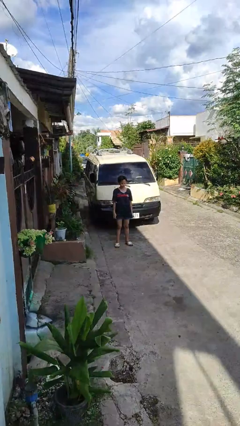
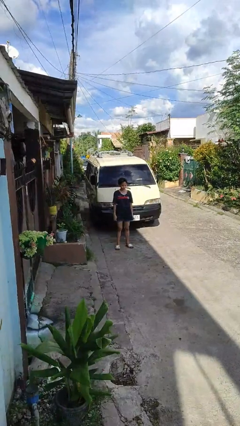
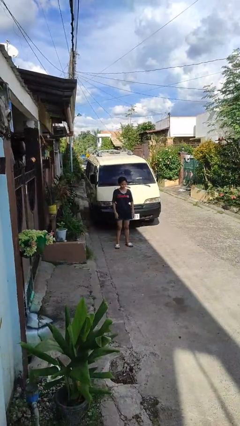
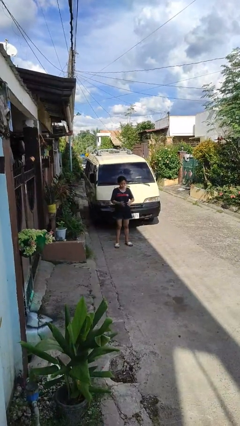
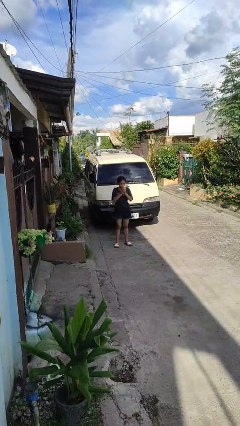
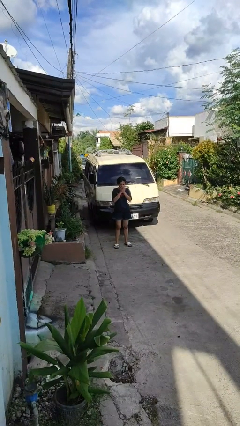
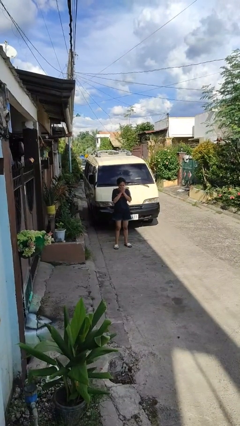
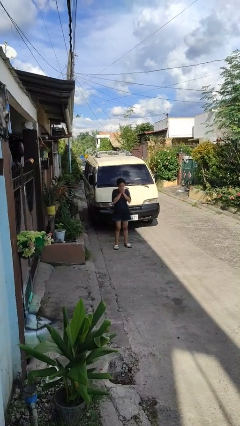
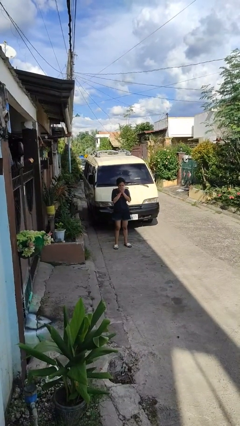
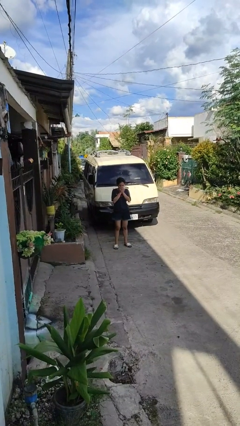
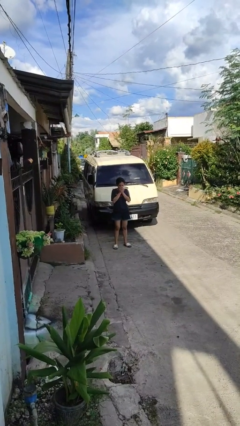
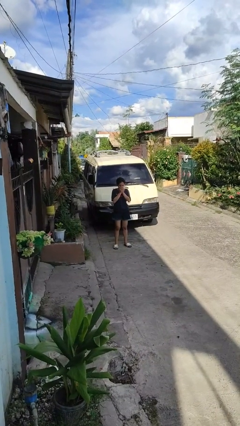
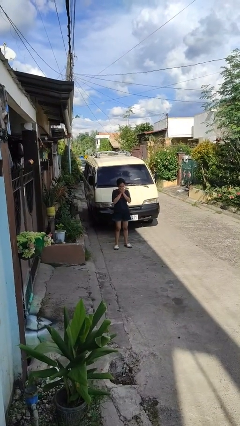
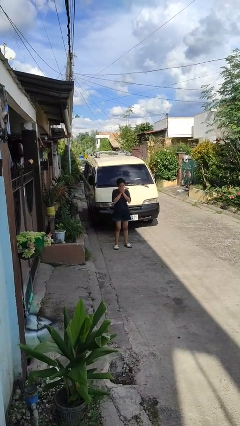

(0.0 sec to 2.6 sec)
person blows into hands

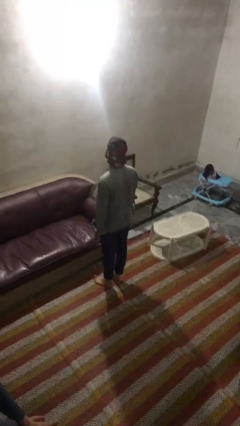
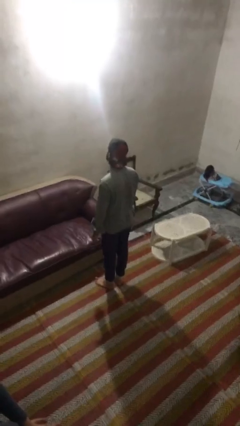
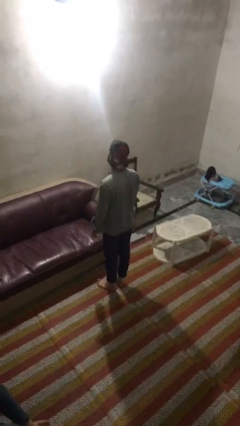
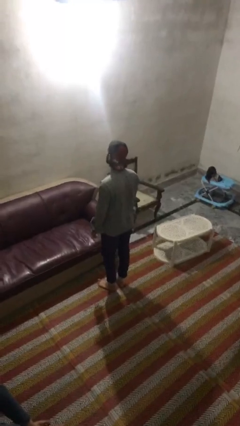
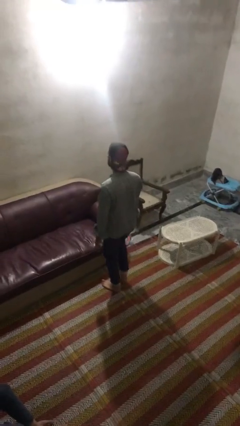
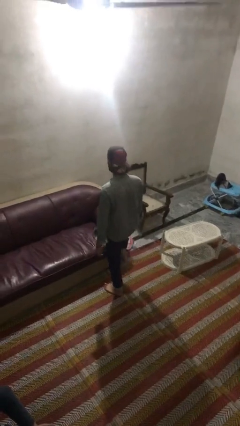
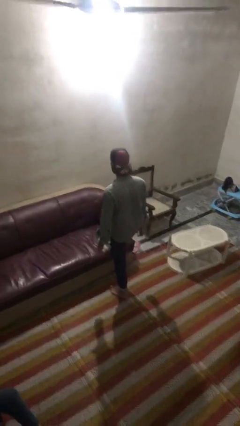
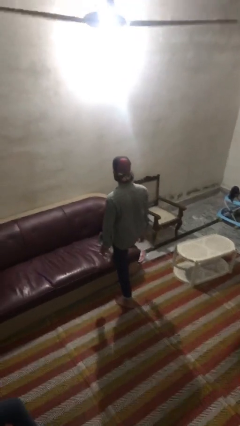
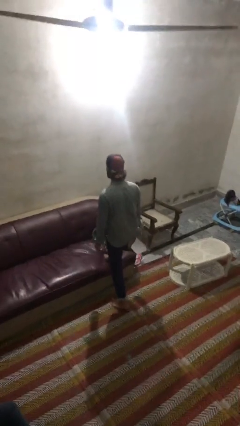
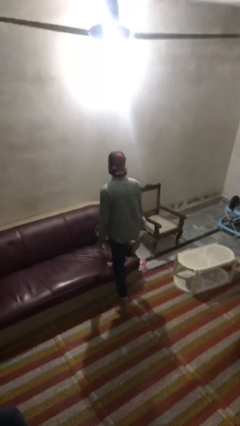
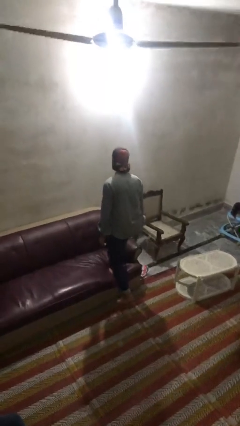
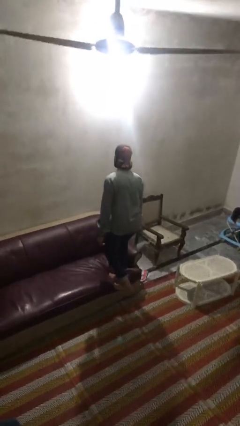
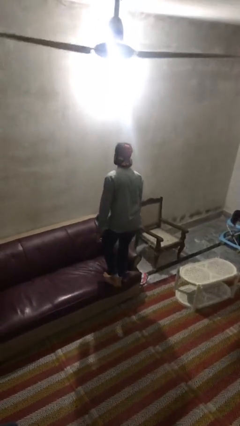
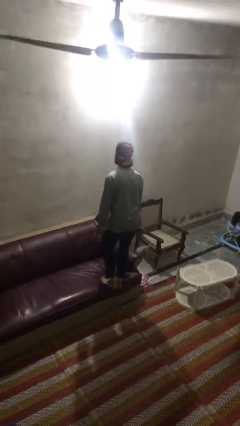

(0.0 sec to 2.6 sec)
person climbs on couch

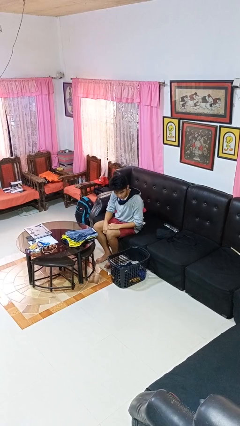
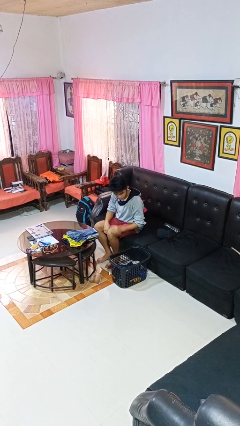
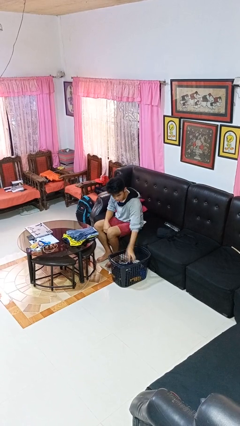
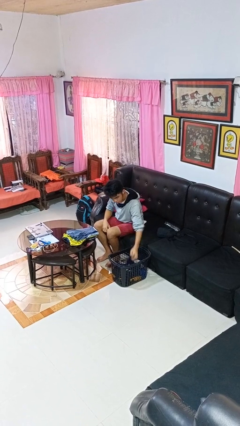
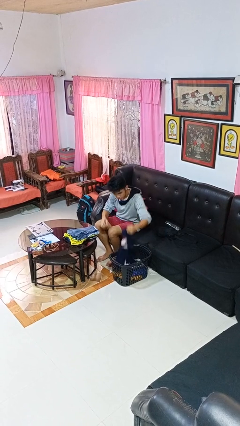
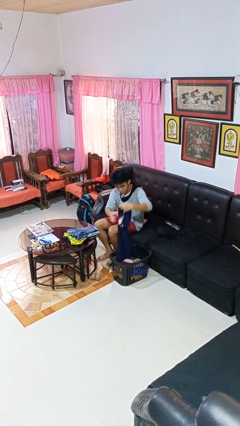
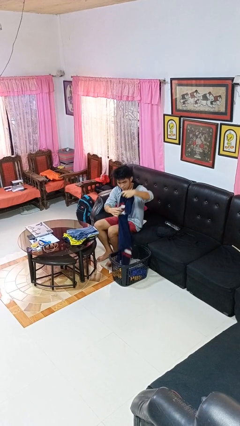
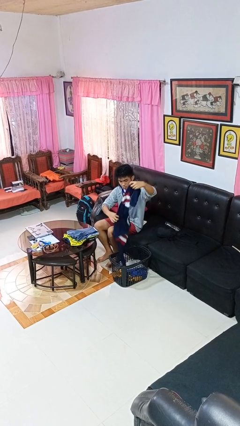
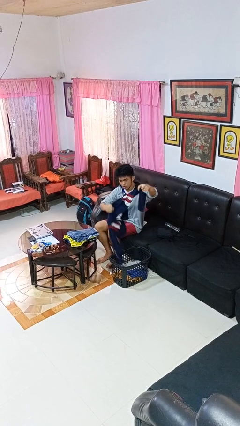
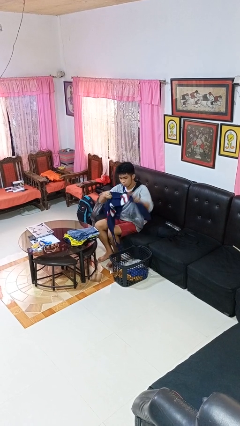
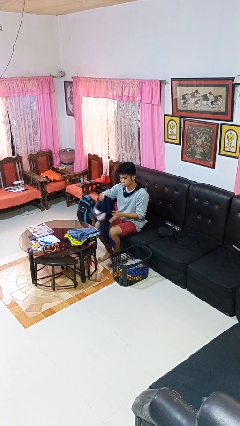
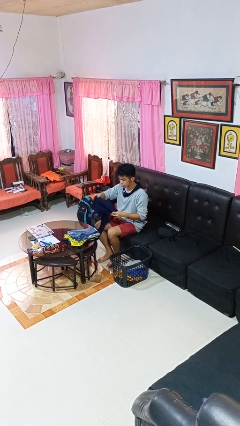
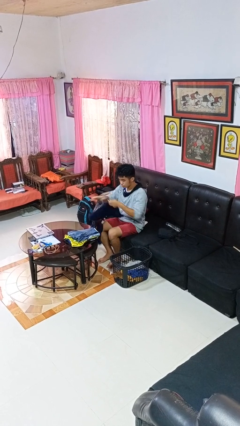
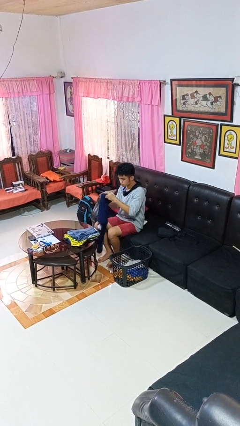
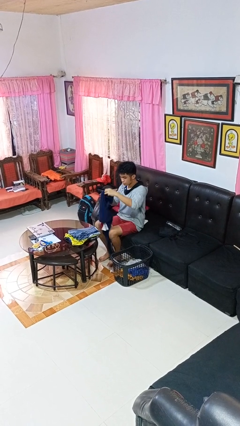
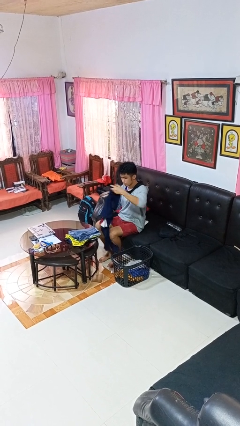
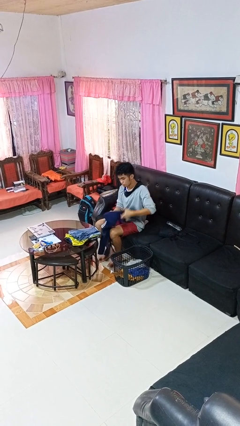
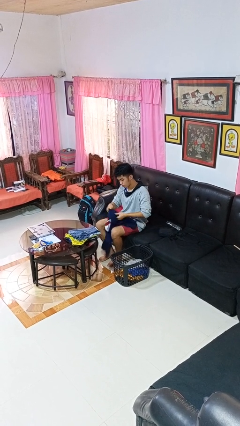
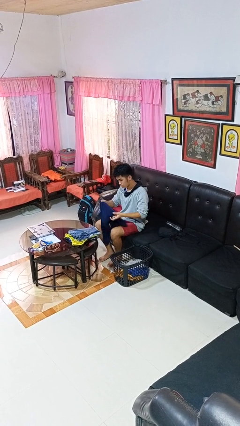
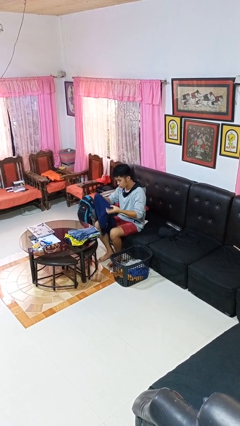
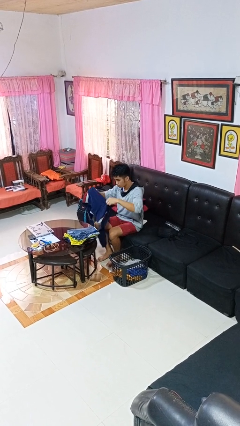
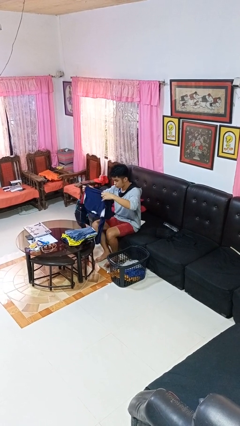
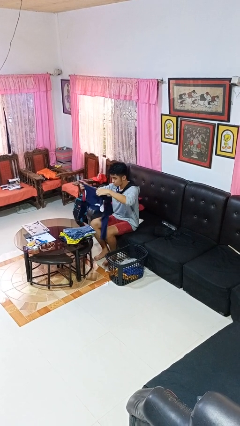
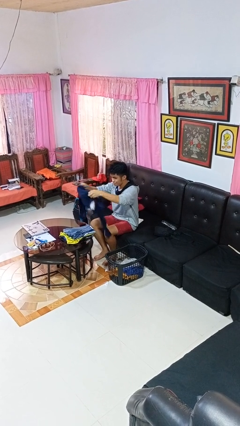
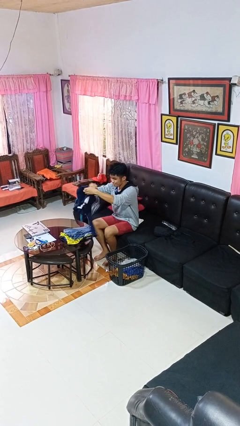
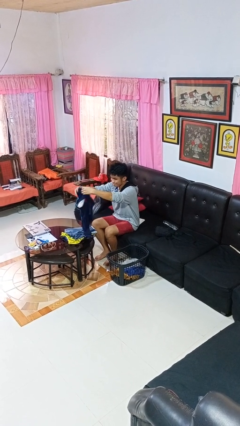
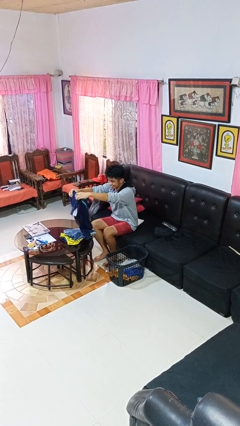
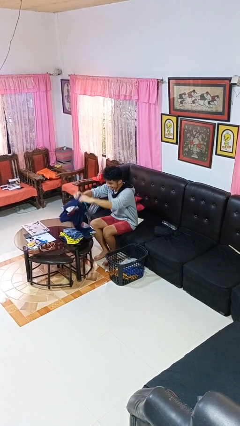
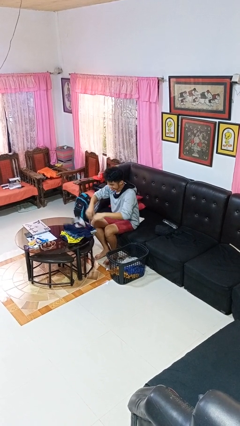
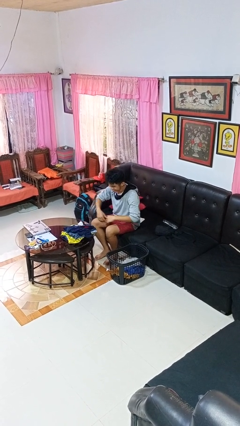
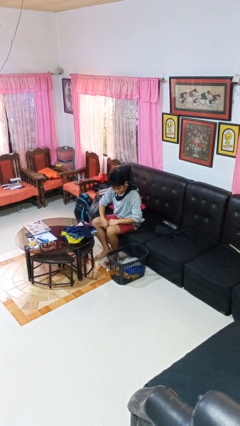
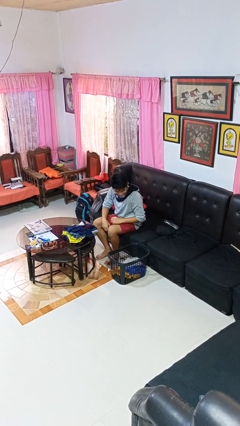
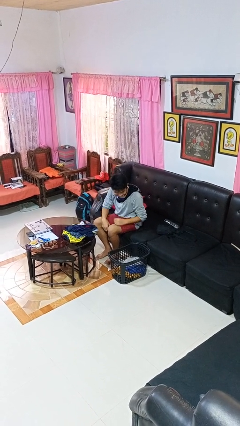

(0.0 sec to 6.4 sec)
person folds shirt

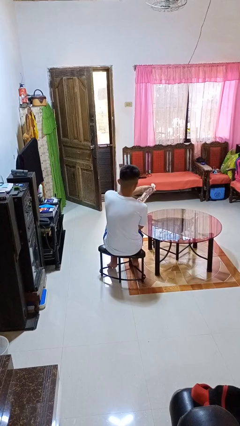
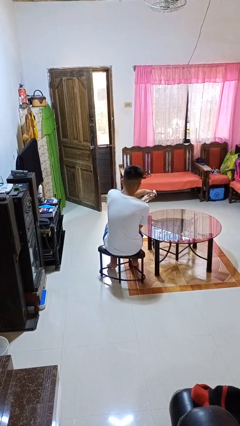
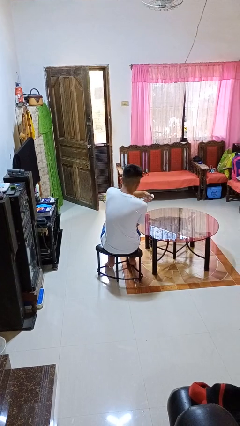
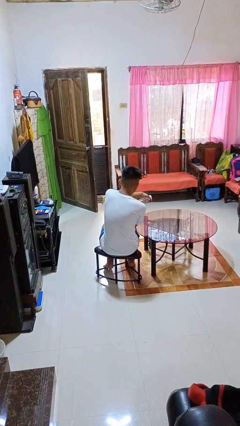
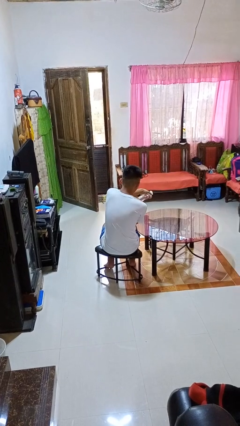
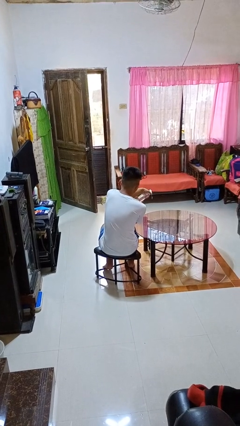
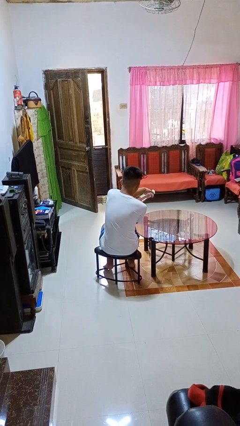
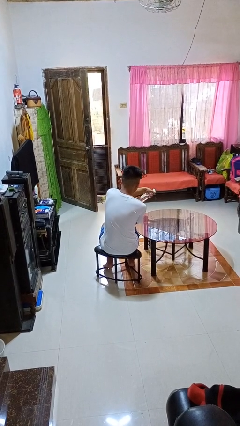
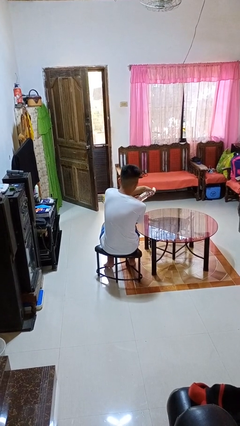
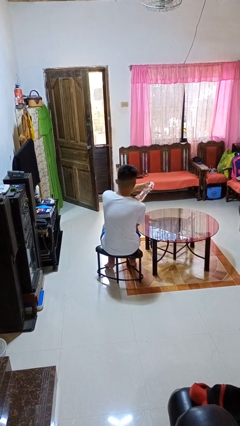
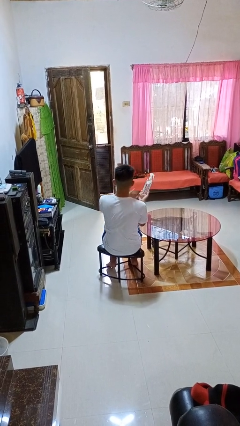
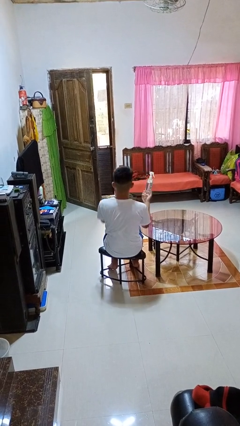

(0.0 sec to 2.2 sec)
person sprays from bottle

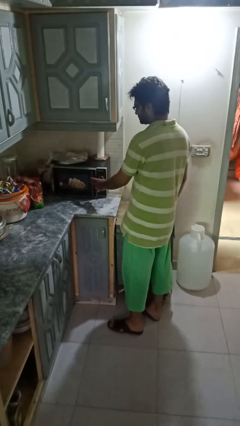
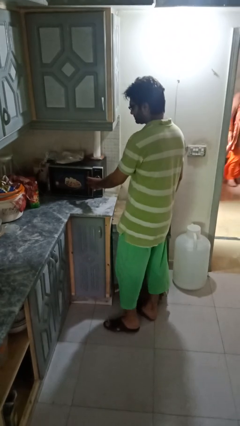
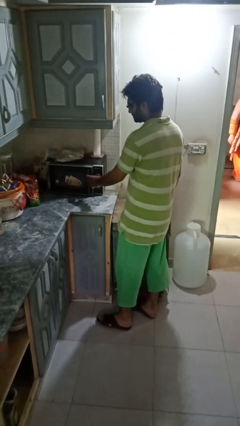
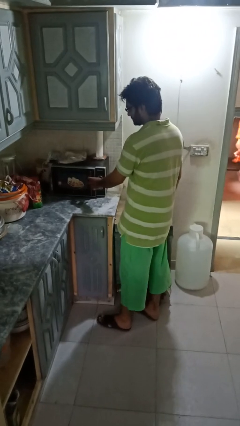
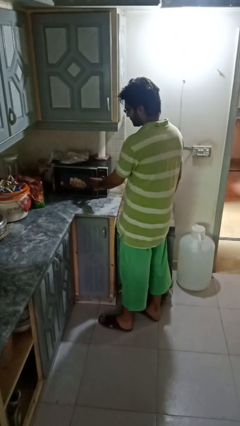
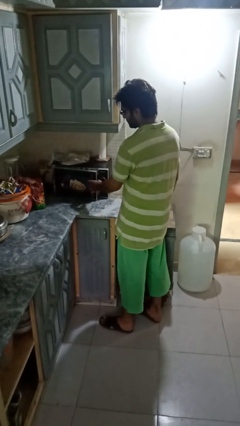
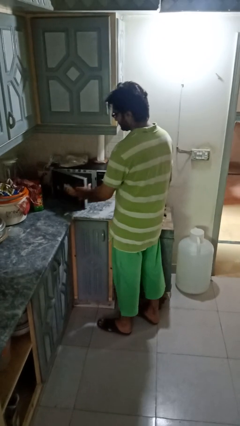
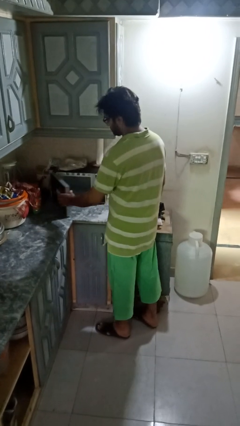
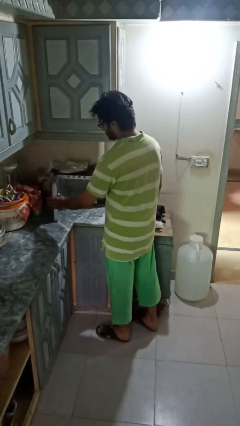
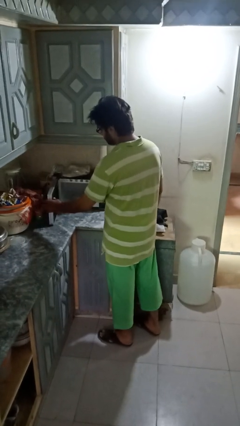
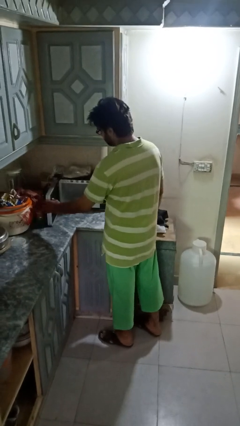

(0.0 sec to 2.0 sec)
person opens microwave

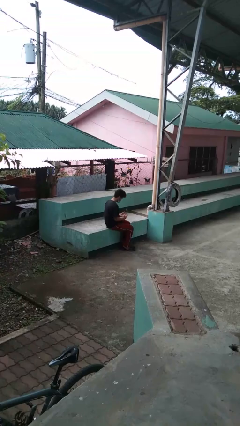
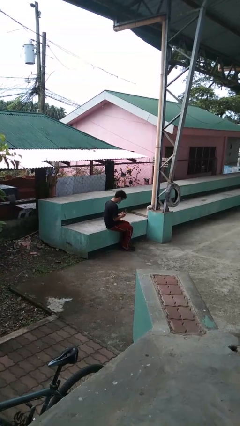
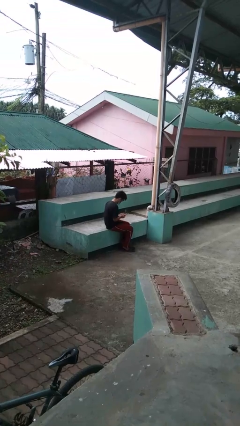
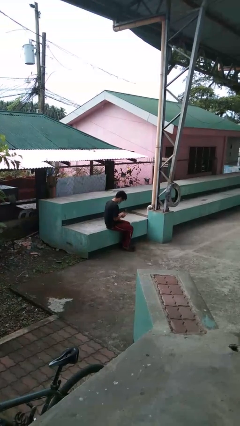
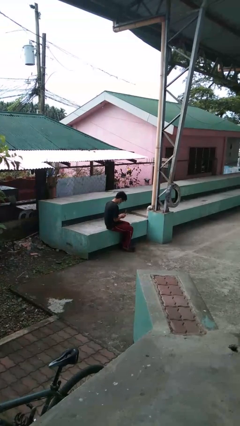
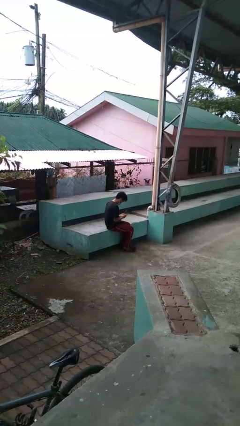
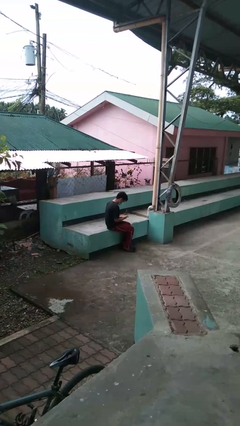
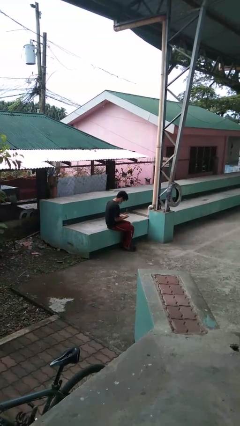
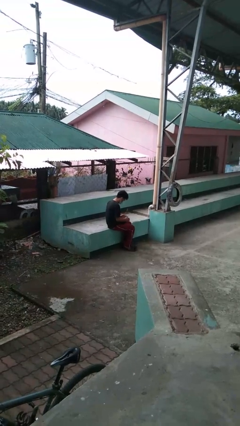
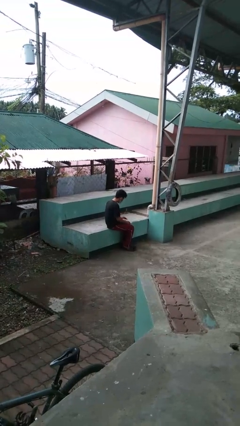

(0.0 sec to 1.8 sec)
person looks at hands in lap

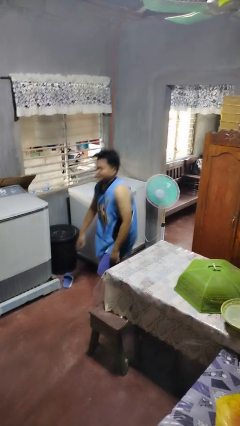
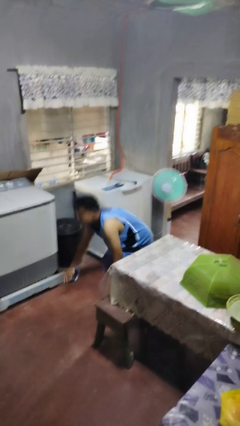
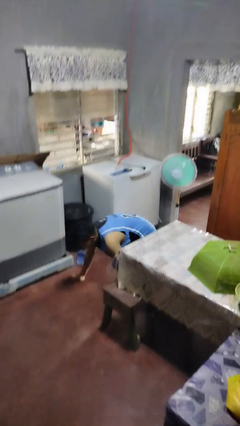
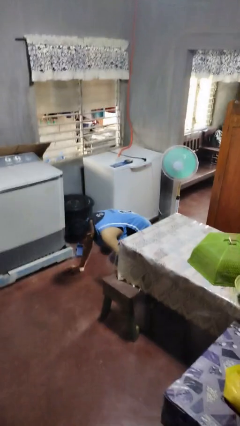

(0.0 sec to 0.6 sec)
person trips on object on floor
